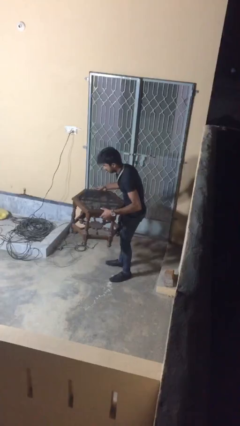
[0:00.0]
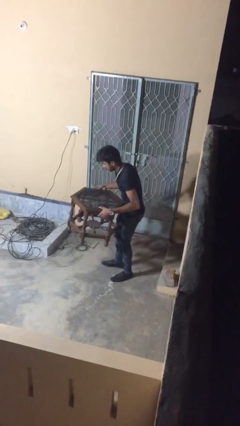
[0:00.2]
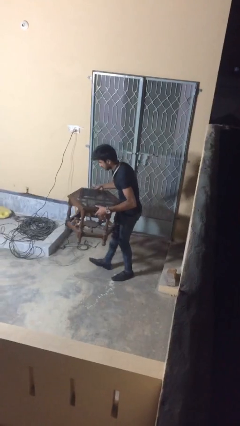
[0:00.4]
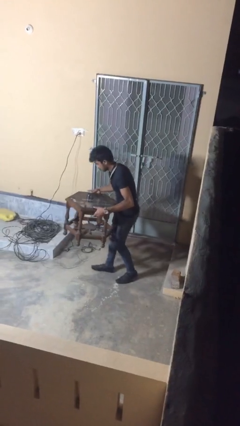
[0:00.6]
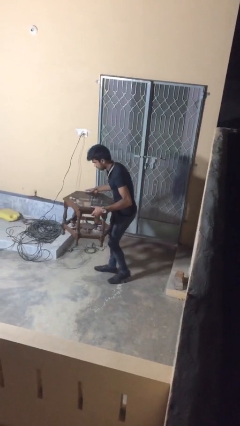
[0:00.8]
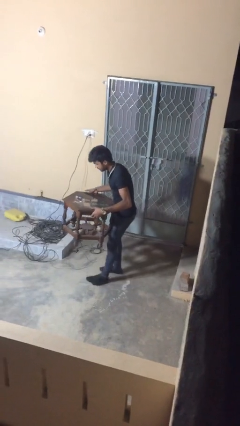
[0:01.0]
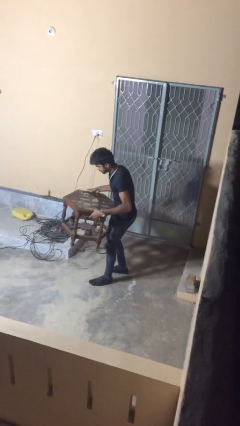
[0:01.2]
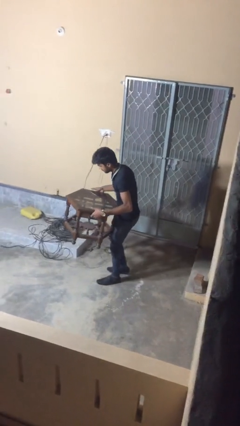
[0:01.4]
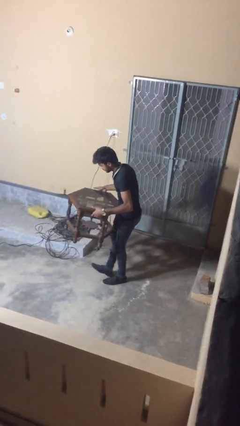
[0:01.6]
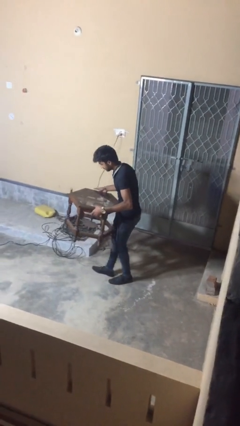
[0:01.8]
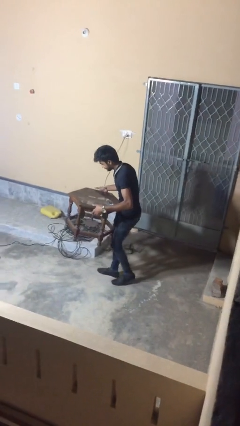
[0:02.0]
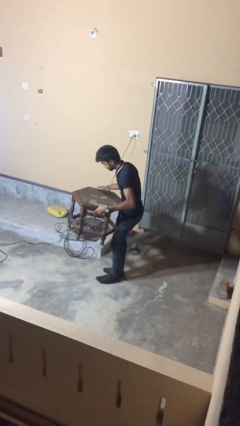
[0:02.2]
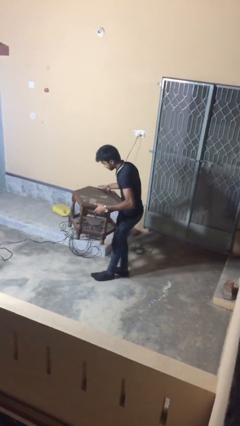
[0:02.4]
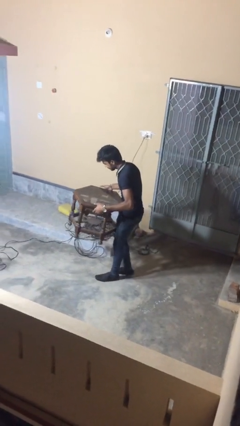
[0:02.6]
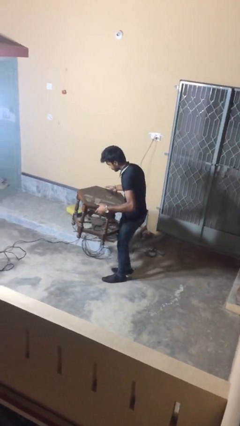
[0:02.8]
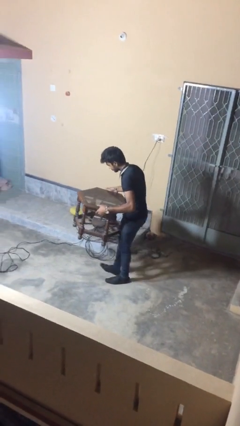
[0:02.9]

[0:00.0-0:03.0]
person carries heavy object

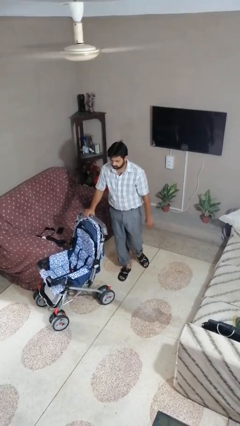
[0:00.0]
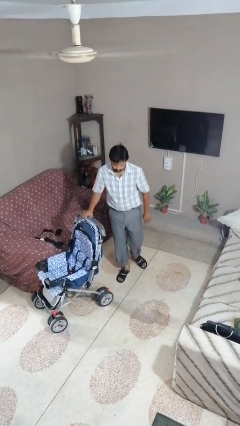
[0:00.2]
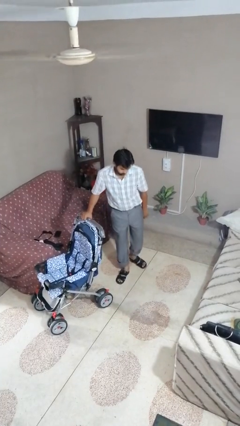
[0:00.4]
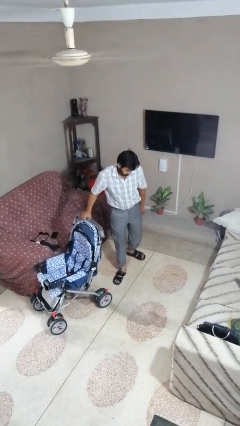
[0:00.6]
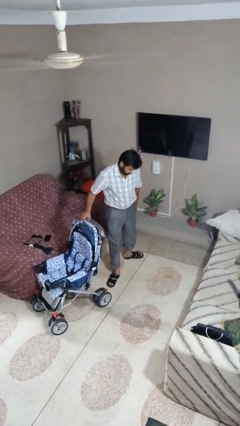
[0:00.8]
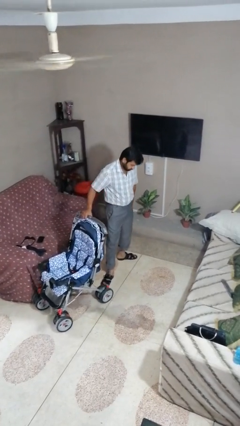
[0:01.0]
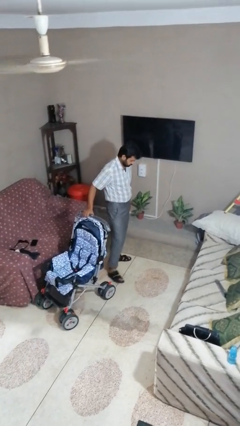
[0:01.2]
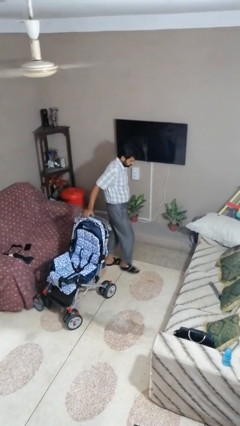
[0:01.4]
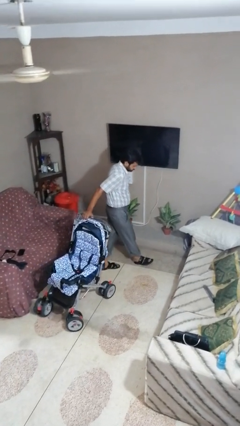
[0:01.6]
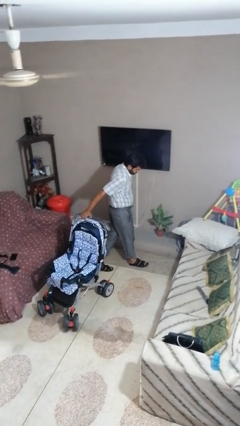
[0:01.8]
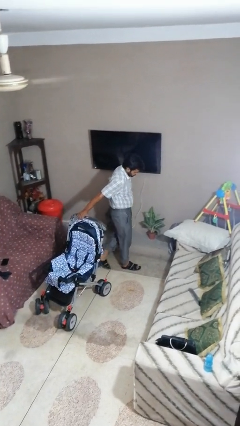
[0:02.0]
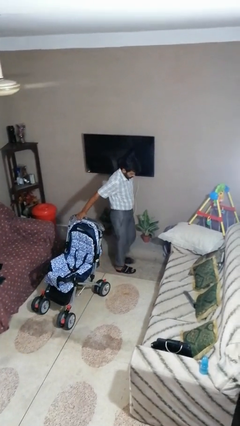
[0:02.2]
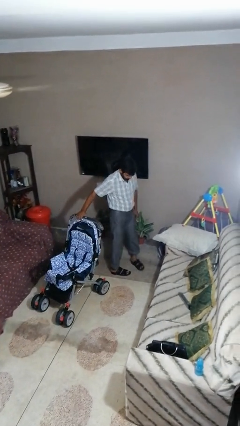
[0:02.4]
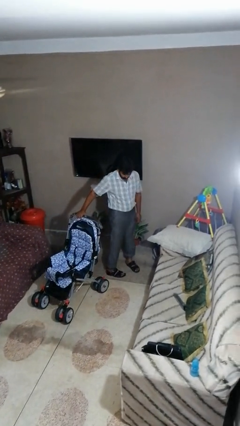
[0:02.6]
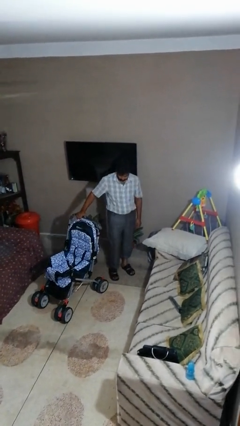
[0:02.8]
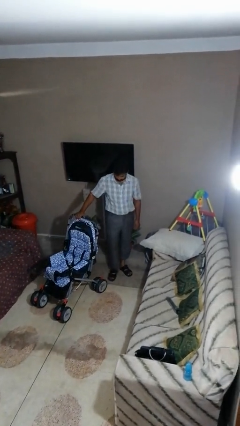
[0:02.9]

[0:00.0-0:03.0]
person pulls wheeled cart

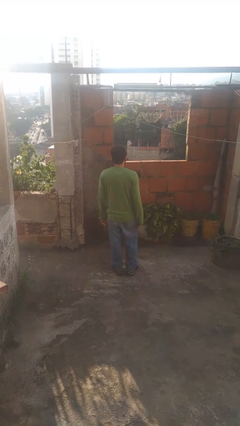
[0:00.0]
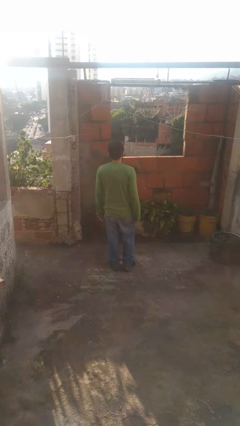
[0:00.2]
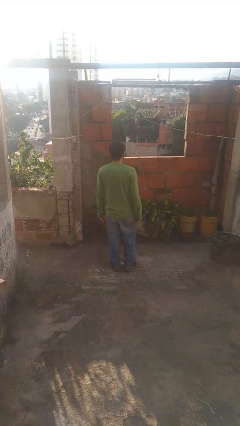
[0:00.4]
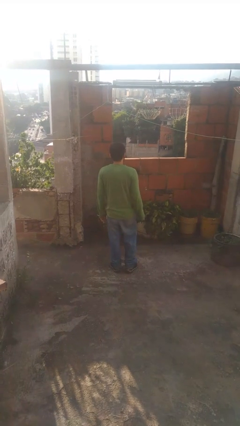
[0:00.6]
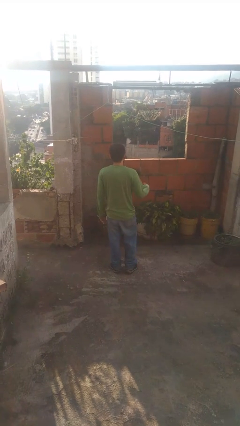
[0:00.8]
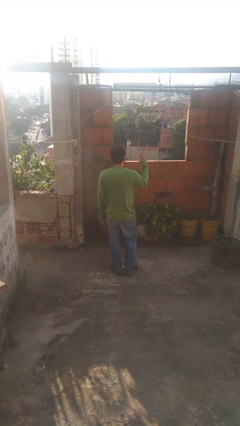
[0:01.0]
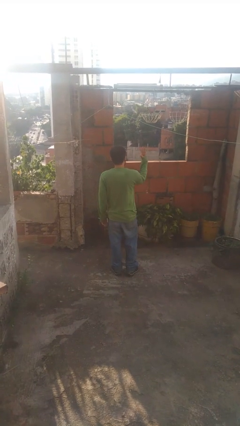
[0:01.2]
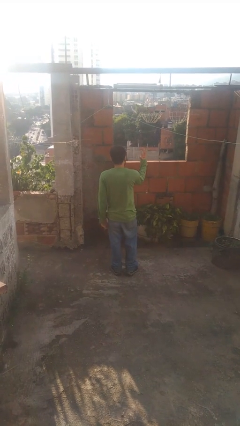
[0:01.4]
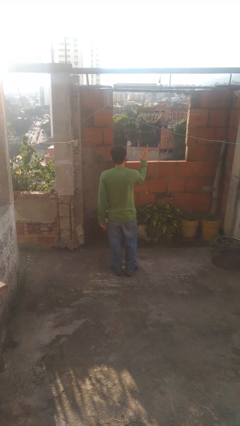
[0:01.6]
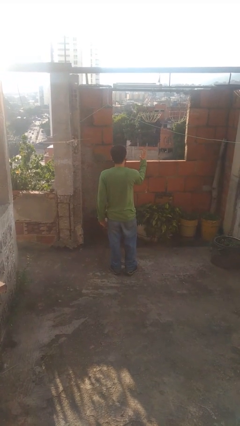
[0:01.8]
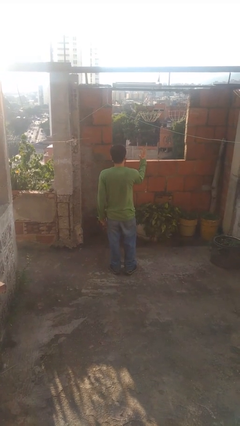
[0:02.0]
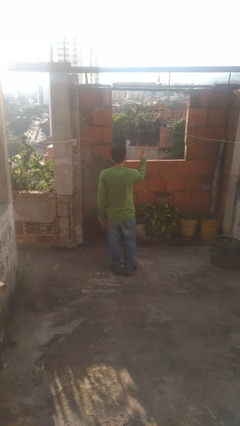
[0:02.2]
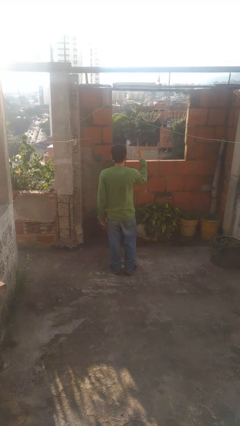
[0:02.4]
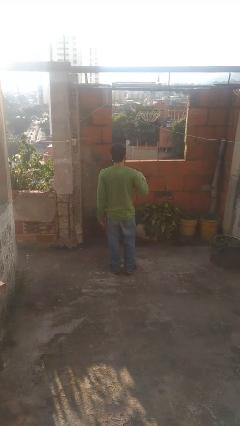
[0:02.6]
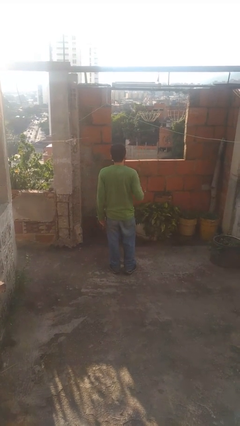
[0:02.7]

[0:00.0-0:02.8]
person gestures number three

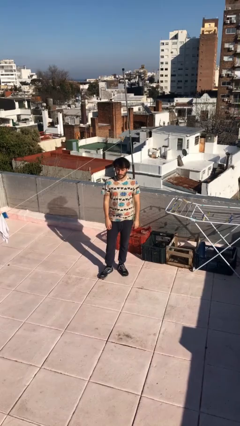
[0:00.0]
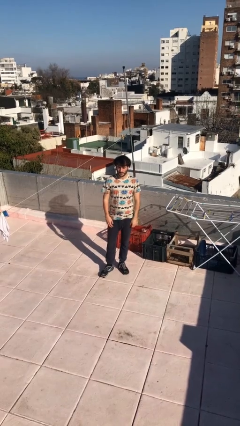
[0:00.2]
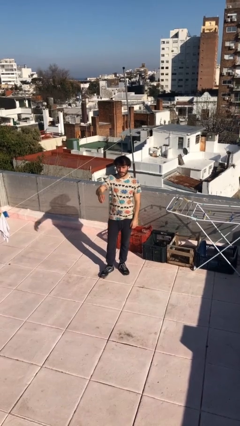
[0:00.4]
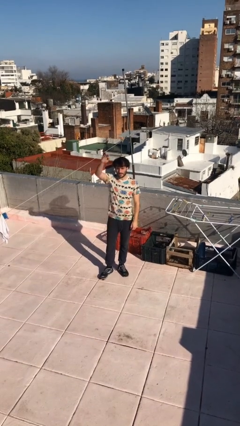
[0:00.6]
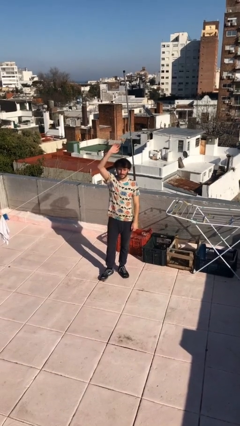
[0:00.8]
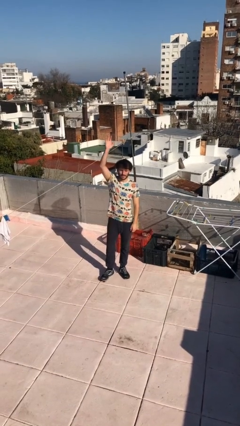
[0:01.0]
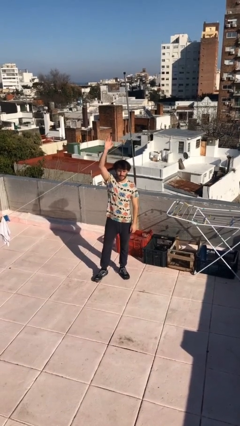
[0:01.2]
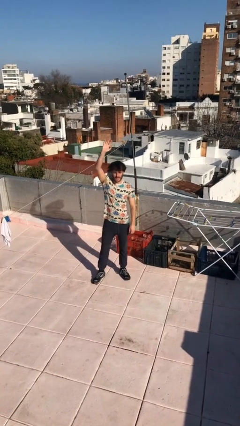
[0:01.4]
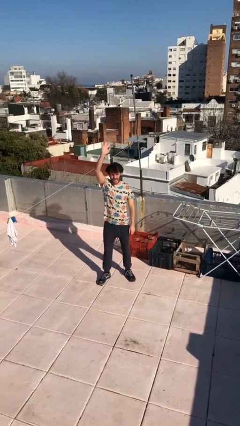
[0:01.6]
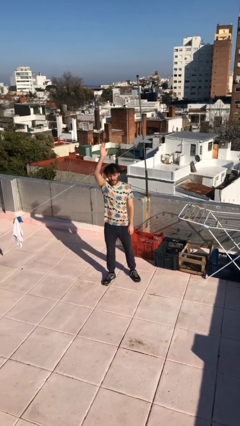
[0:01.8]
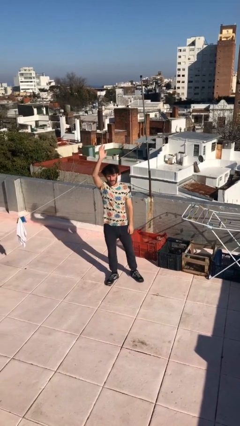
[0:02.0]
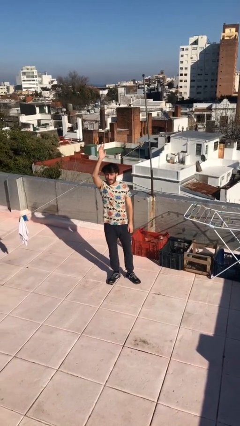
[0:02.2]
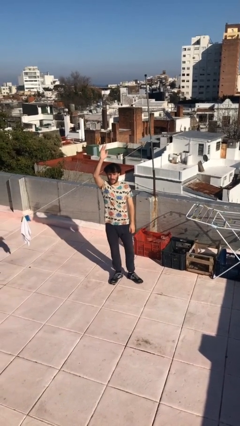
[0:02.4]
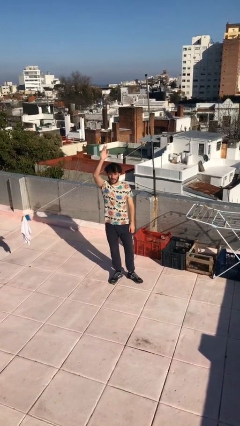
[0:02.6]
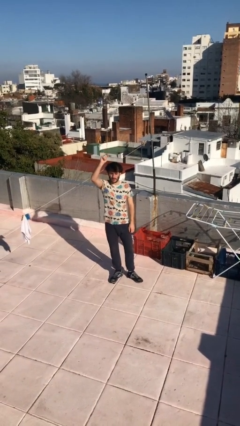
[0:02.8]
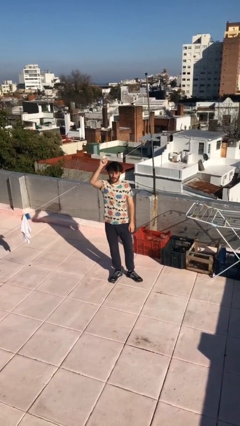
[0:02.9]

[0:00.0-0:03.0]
person gestures raise hand

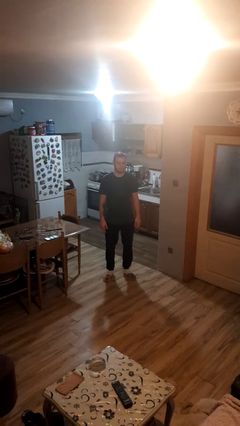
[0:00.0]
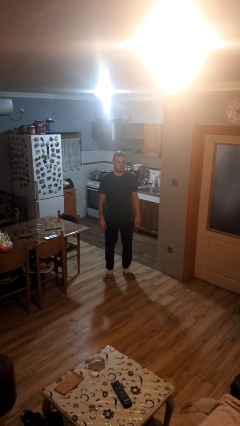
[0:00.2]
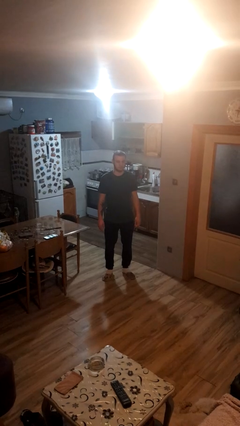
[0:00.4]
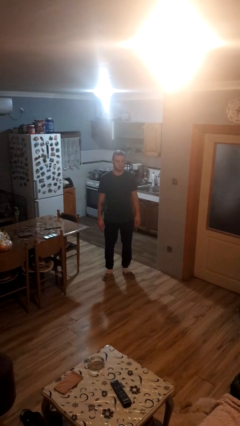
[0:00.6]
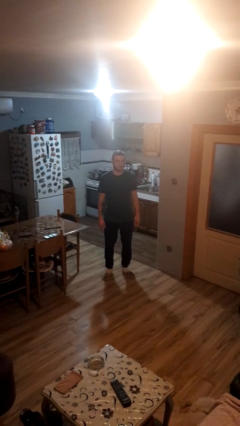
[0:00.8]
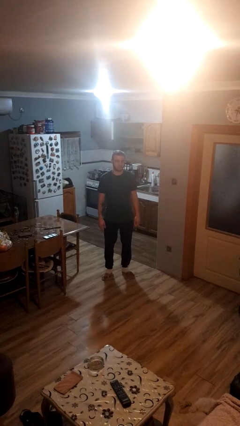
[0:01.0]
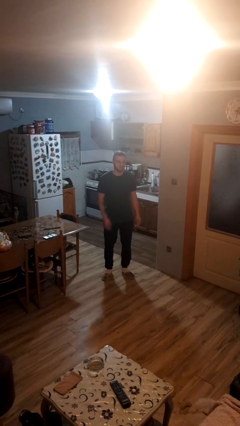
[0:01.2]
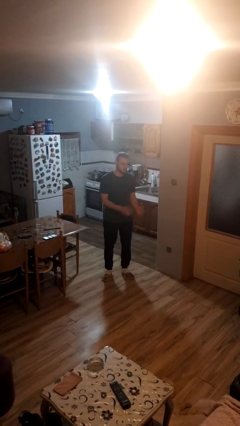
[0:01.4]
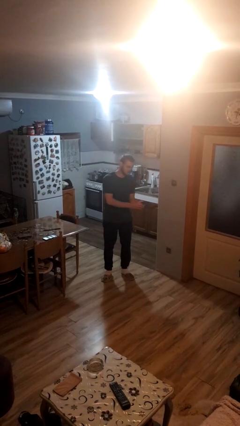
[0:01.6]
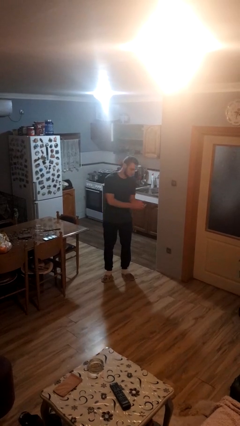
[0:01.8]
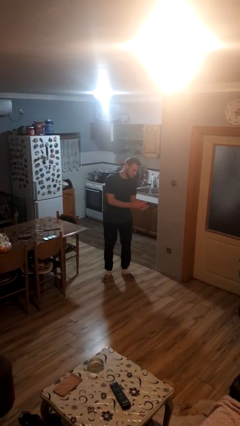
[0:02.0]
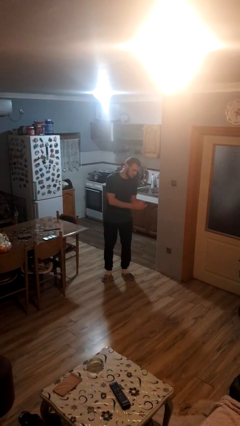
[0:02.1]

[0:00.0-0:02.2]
person claps hands

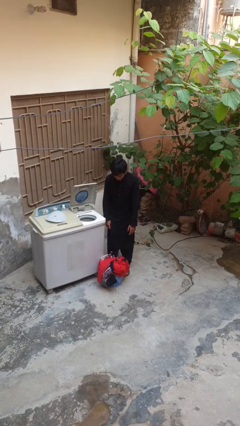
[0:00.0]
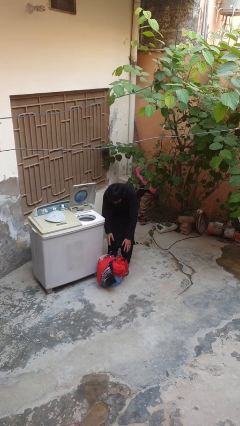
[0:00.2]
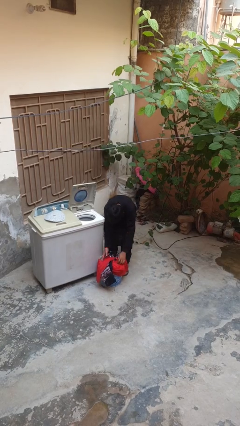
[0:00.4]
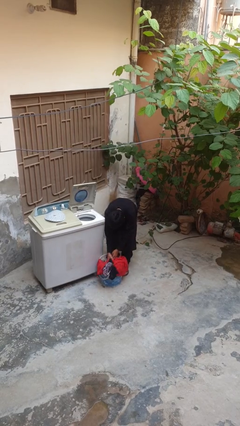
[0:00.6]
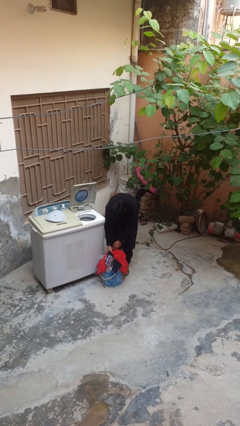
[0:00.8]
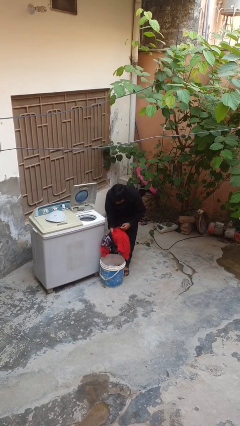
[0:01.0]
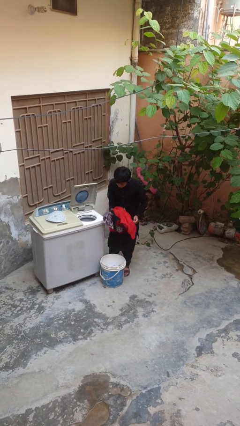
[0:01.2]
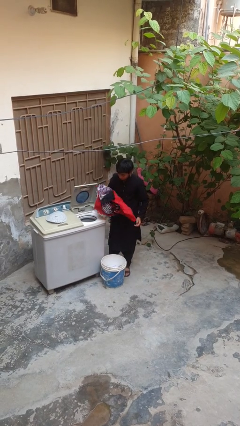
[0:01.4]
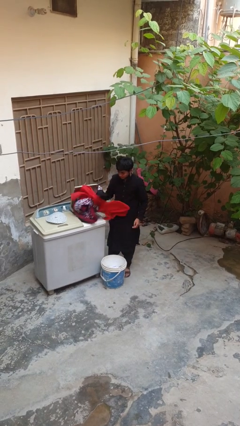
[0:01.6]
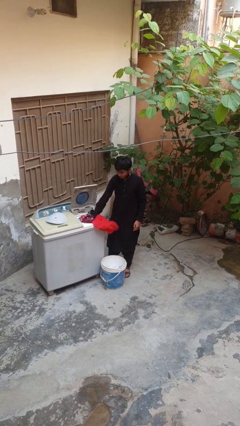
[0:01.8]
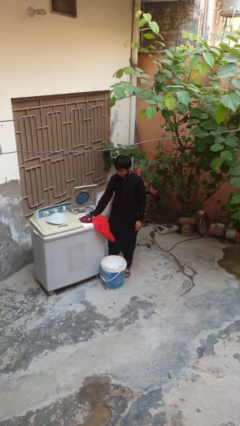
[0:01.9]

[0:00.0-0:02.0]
person loads dryer

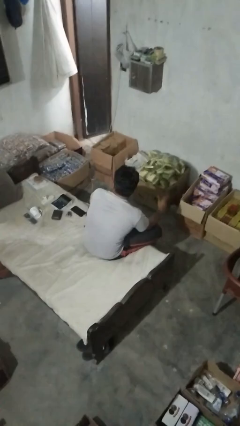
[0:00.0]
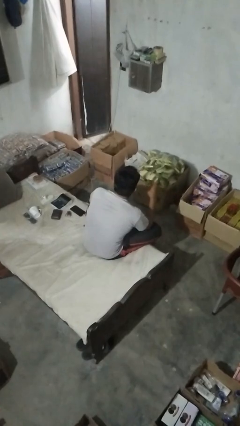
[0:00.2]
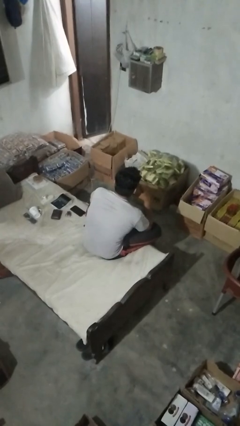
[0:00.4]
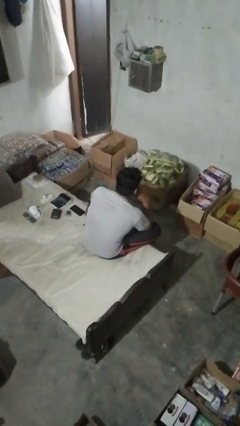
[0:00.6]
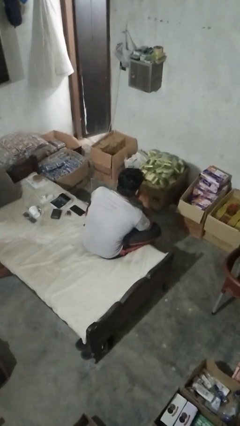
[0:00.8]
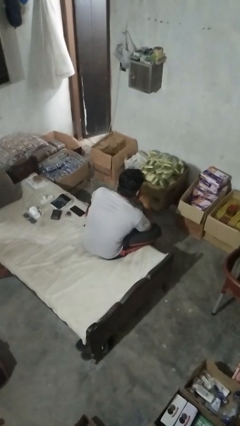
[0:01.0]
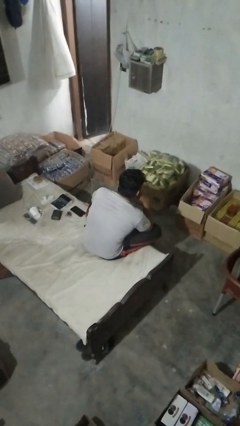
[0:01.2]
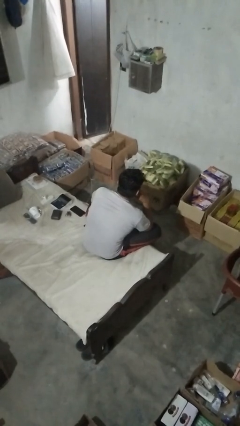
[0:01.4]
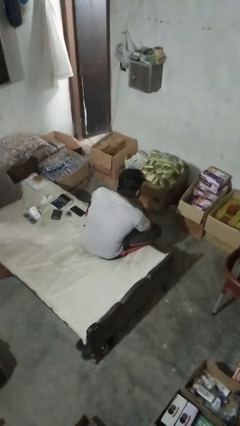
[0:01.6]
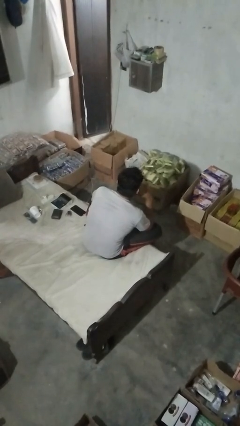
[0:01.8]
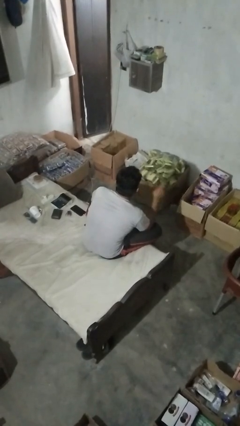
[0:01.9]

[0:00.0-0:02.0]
person strokes chin
